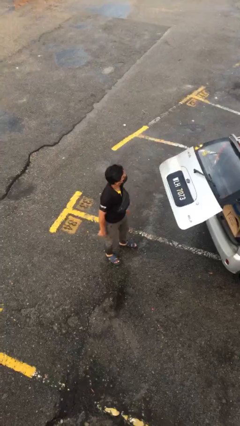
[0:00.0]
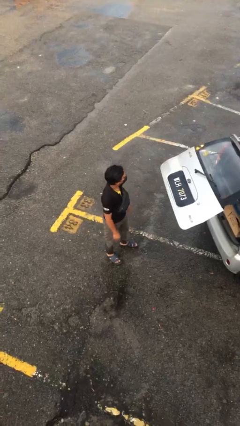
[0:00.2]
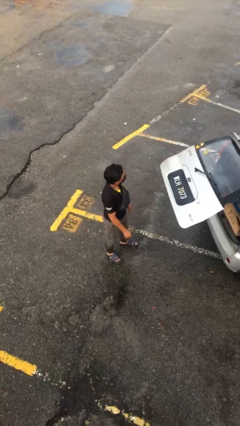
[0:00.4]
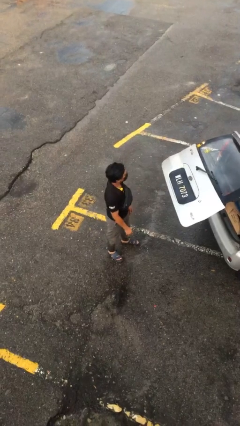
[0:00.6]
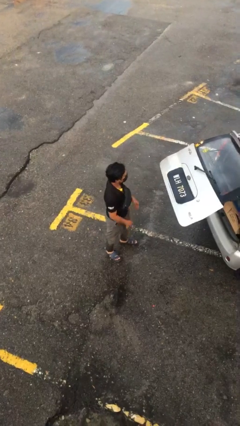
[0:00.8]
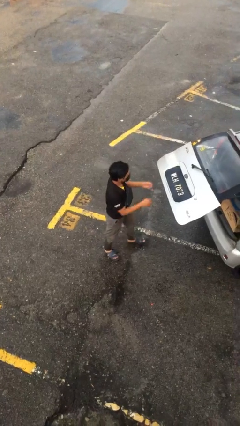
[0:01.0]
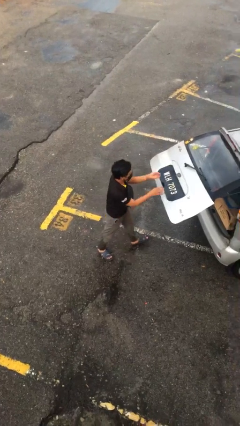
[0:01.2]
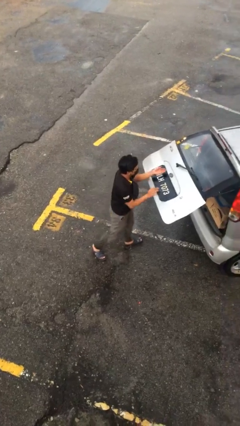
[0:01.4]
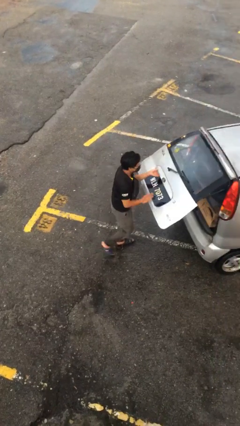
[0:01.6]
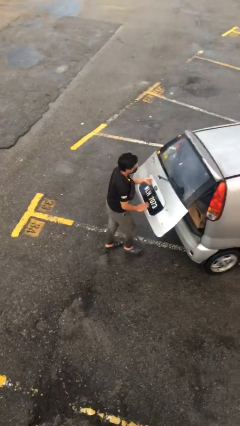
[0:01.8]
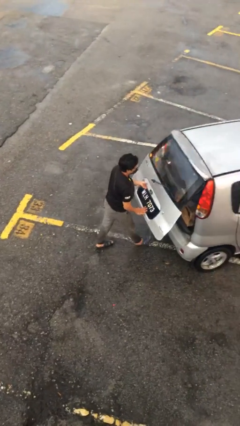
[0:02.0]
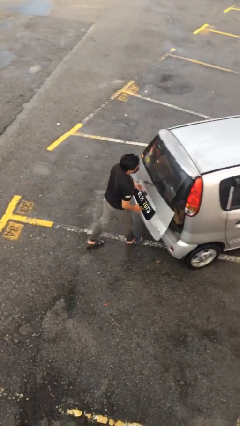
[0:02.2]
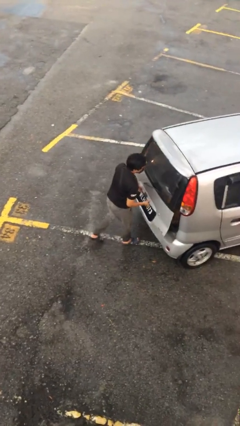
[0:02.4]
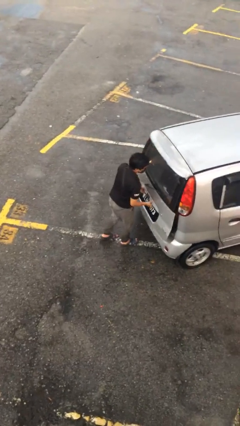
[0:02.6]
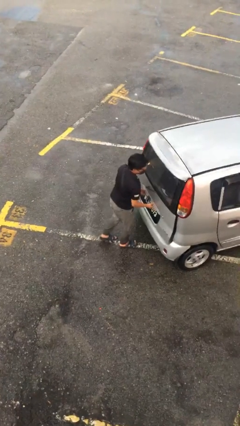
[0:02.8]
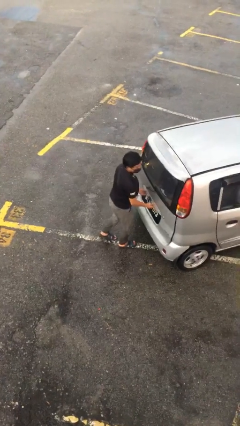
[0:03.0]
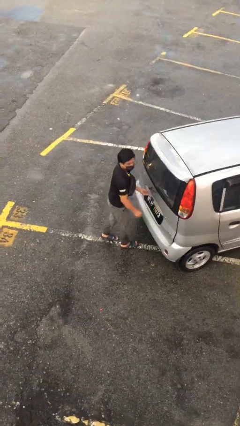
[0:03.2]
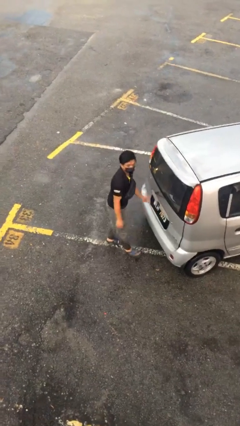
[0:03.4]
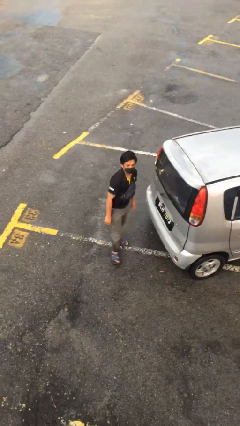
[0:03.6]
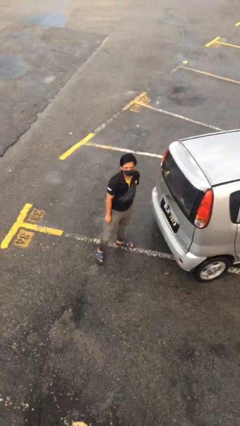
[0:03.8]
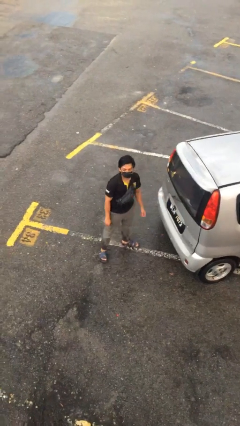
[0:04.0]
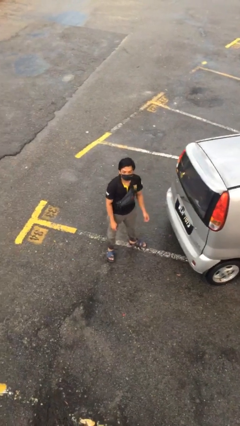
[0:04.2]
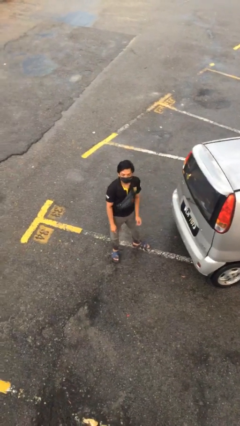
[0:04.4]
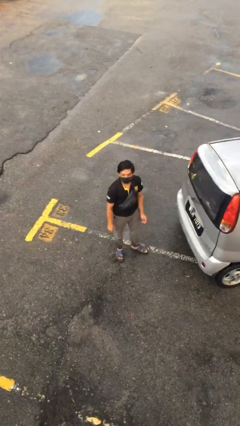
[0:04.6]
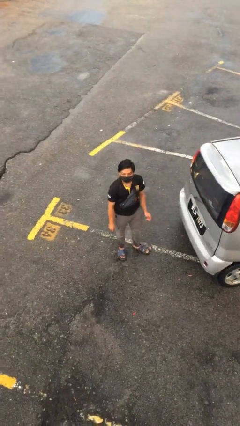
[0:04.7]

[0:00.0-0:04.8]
person closes car trunk

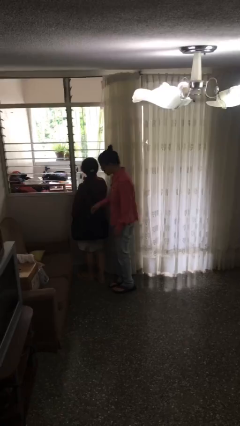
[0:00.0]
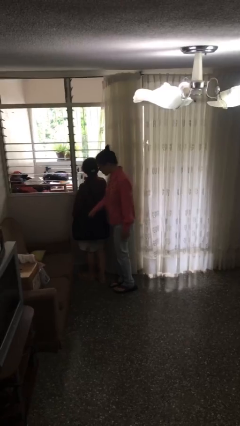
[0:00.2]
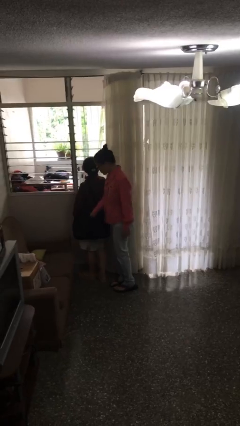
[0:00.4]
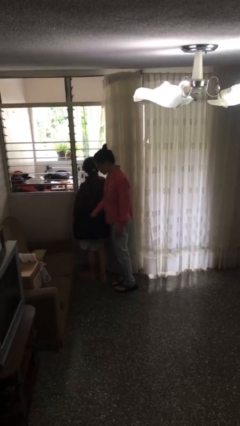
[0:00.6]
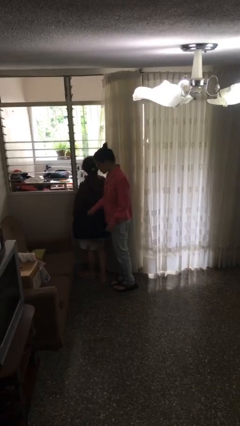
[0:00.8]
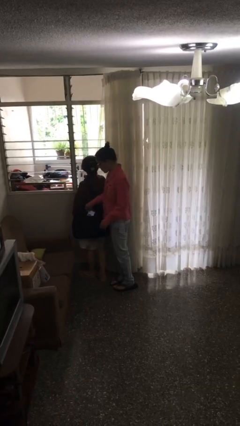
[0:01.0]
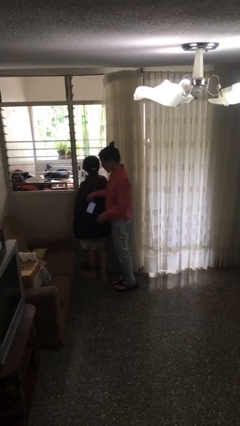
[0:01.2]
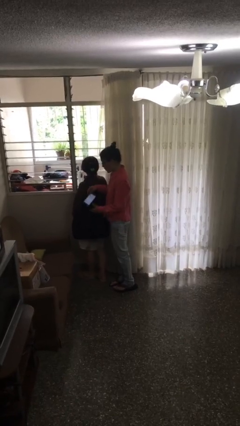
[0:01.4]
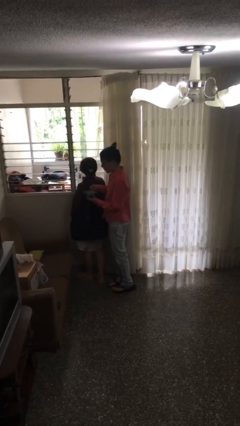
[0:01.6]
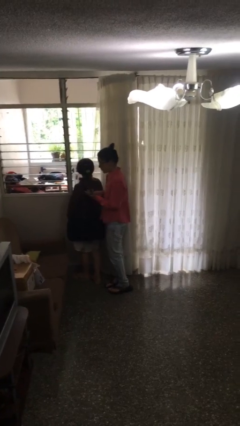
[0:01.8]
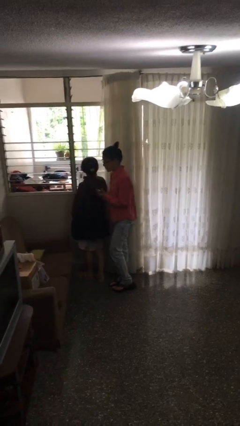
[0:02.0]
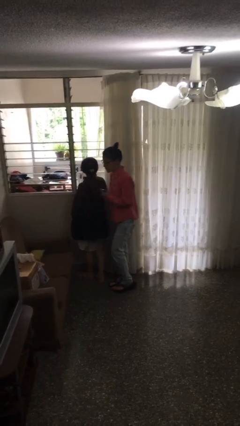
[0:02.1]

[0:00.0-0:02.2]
person steals object from person

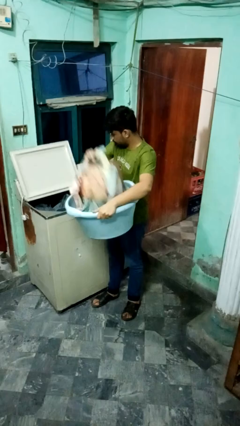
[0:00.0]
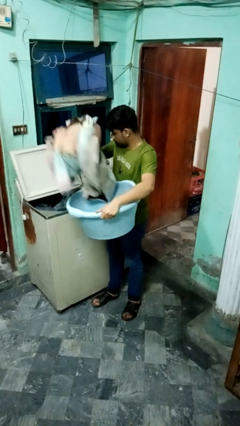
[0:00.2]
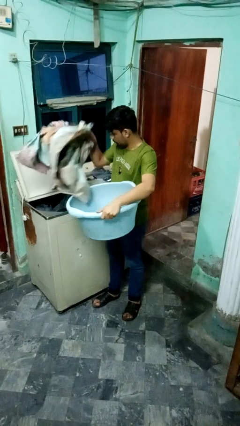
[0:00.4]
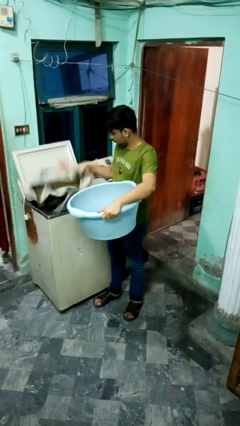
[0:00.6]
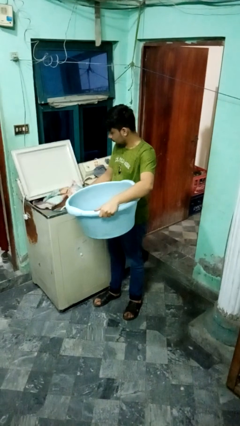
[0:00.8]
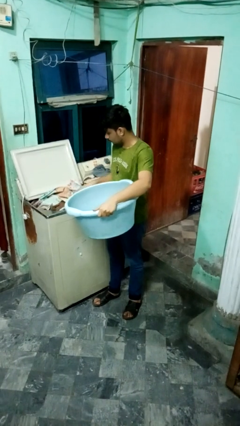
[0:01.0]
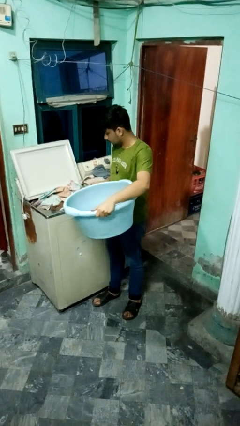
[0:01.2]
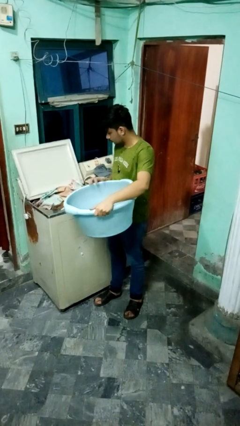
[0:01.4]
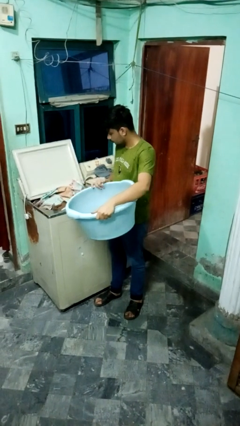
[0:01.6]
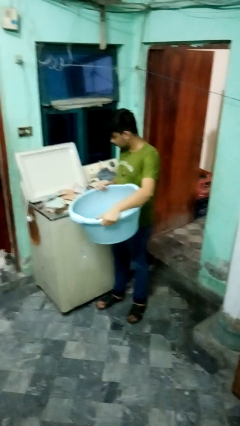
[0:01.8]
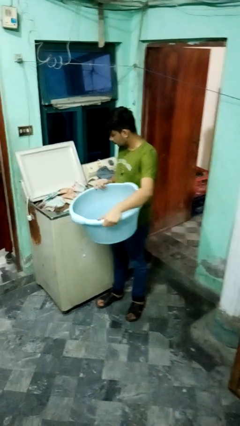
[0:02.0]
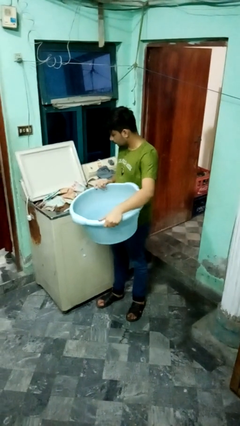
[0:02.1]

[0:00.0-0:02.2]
person loads clotheswasher

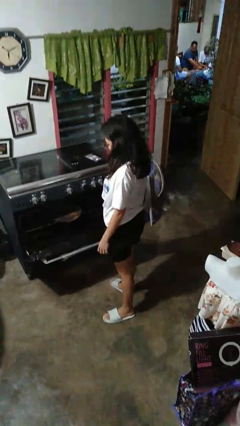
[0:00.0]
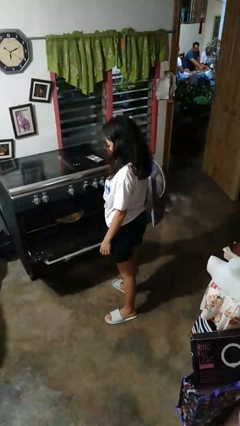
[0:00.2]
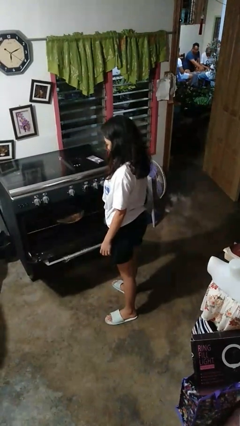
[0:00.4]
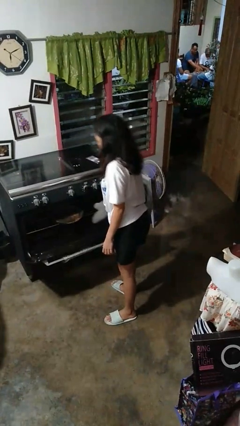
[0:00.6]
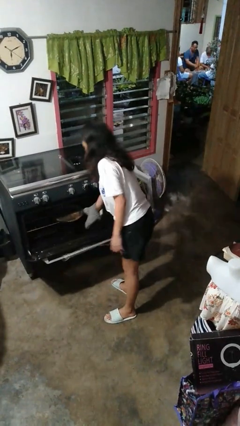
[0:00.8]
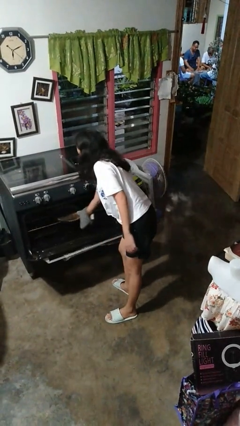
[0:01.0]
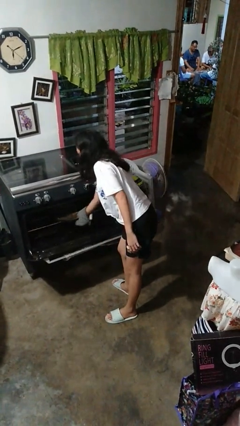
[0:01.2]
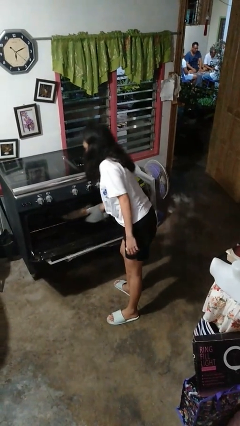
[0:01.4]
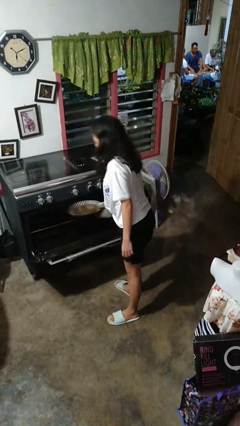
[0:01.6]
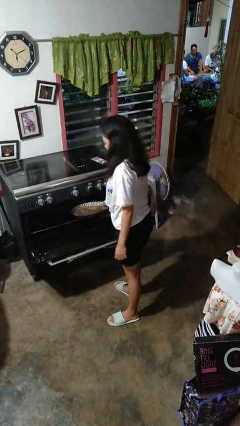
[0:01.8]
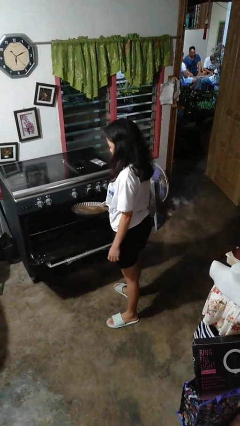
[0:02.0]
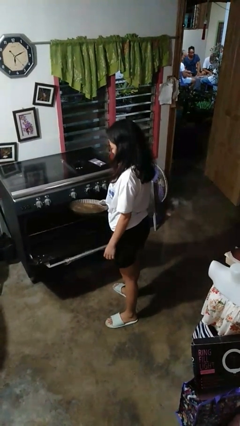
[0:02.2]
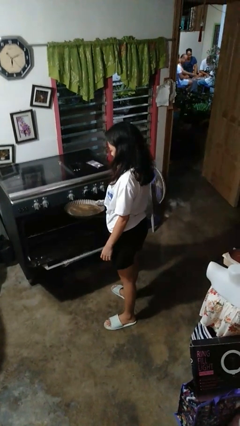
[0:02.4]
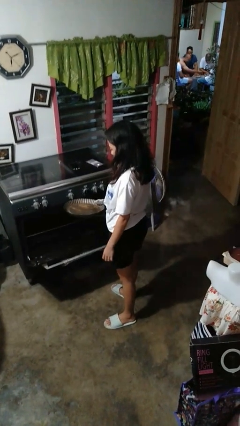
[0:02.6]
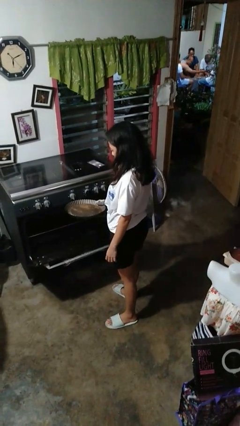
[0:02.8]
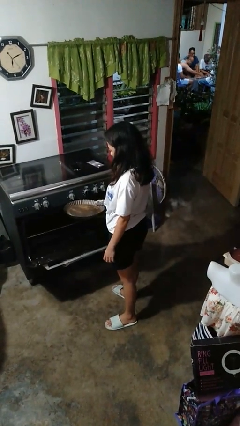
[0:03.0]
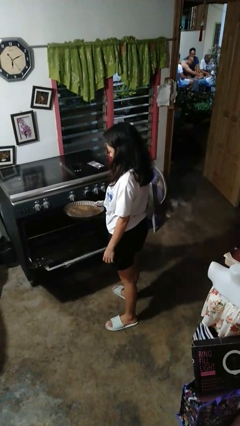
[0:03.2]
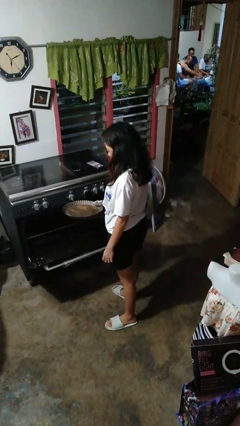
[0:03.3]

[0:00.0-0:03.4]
person takes object from oven

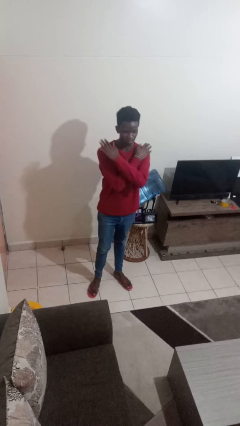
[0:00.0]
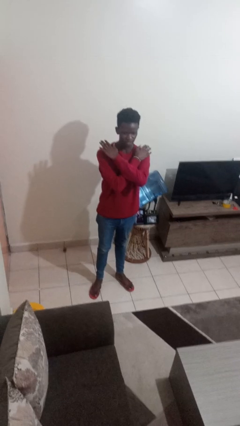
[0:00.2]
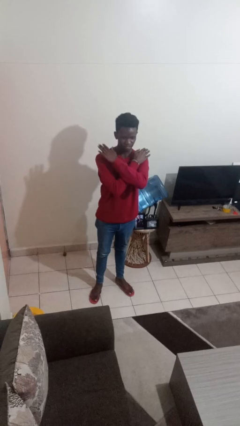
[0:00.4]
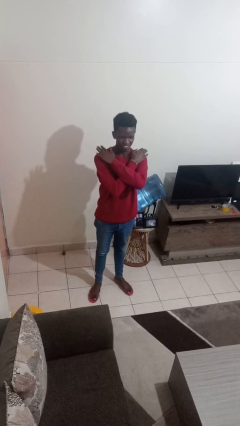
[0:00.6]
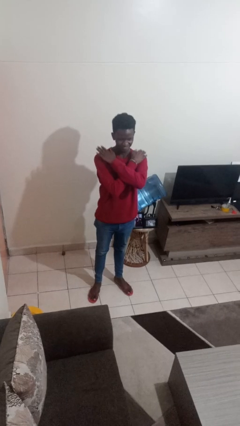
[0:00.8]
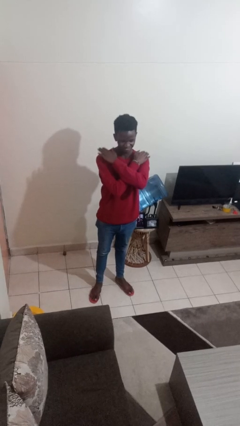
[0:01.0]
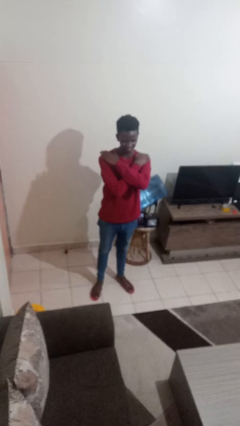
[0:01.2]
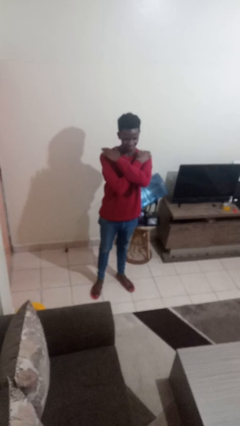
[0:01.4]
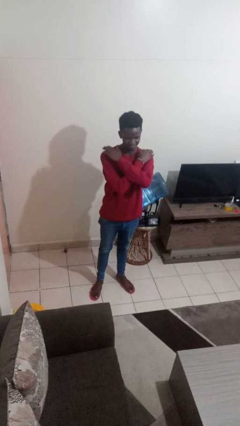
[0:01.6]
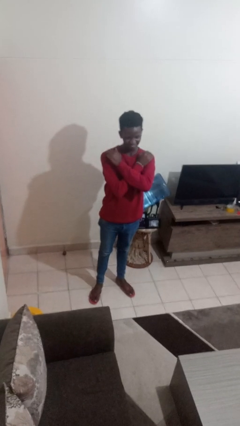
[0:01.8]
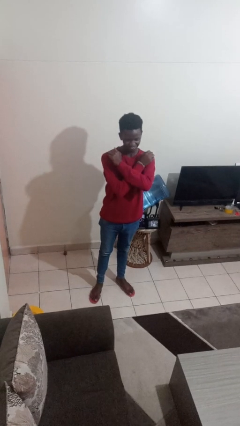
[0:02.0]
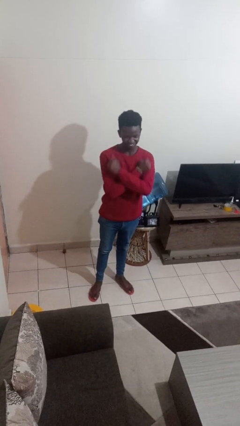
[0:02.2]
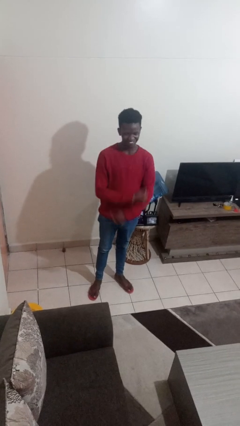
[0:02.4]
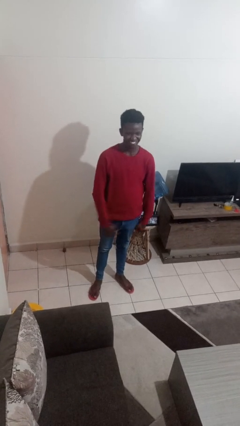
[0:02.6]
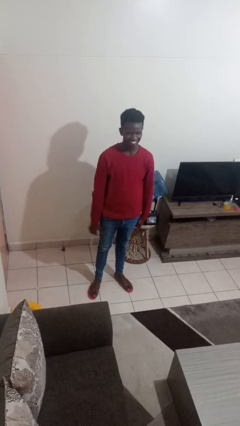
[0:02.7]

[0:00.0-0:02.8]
person gestures arms x

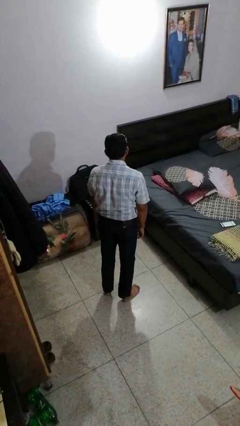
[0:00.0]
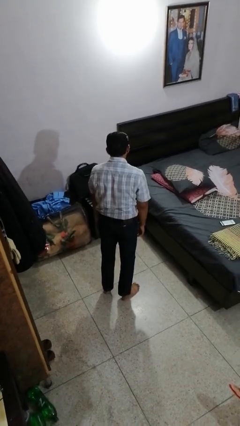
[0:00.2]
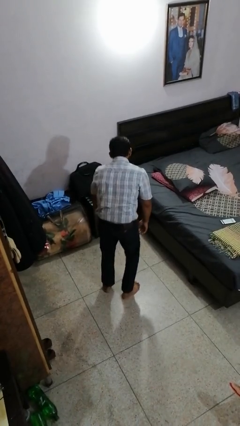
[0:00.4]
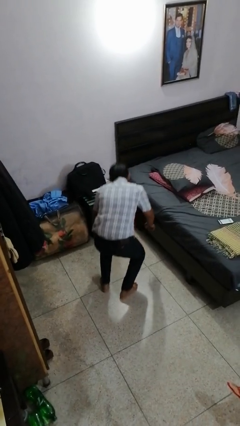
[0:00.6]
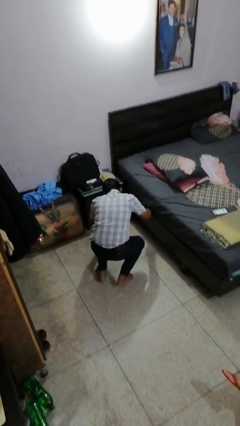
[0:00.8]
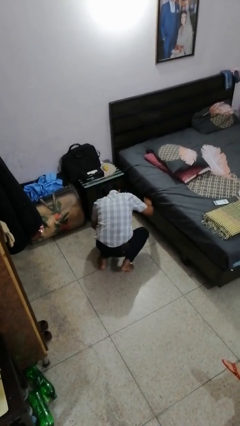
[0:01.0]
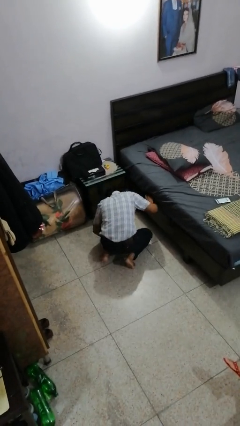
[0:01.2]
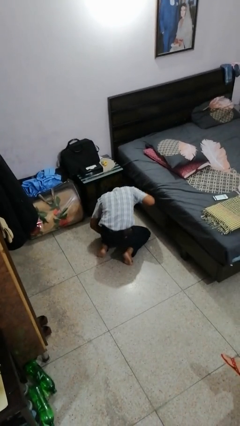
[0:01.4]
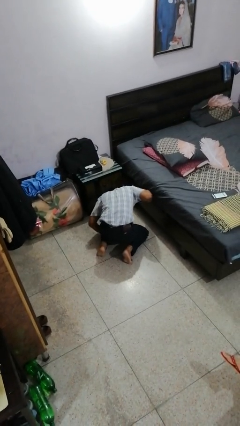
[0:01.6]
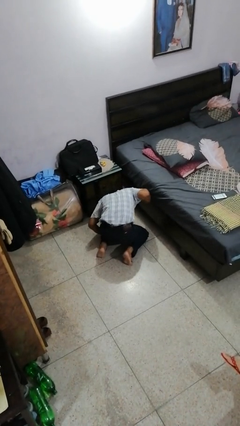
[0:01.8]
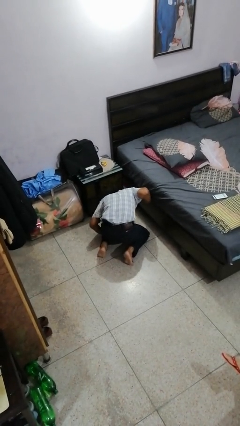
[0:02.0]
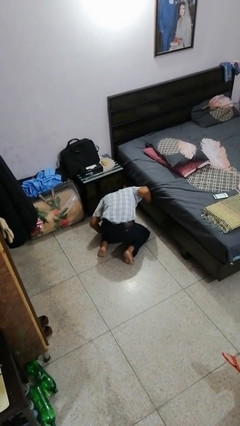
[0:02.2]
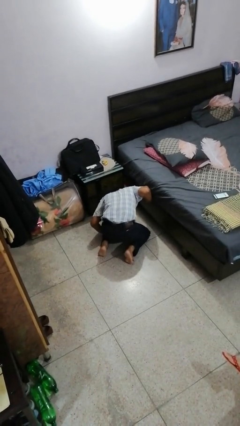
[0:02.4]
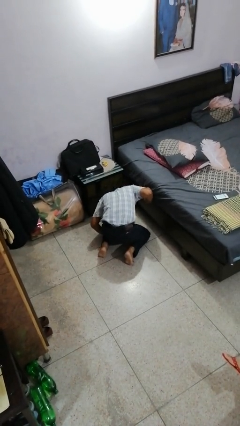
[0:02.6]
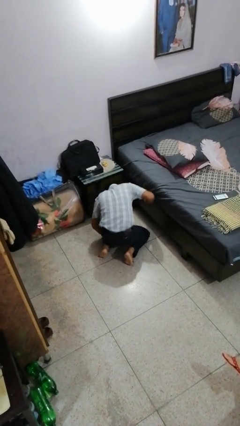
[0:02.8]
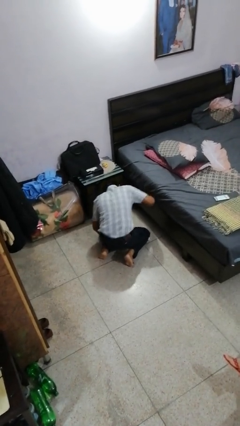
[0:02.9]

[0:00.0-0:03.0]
person searches under bed
